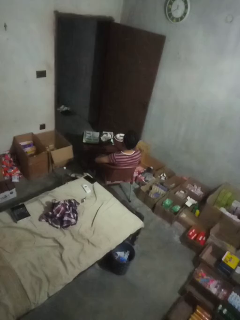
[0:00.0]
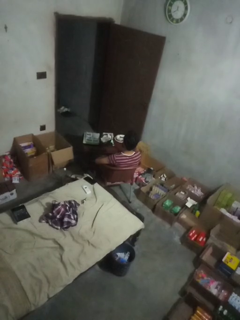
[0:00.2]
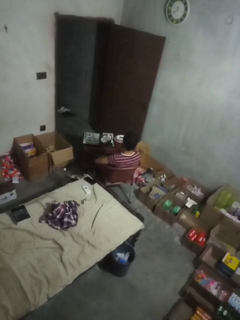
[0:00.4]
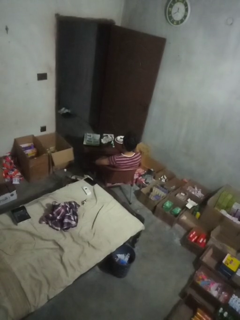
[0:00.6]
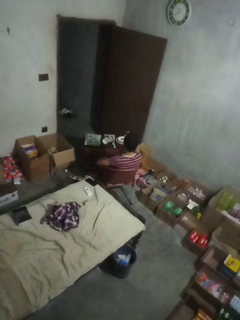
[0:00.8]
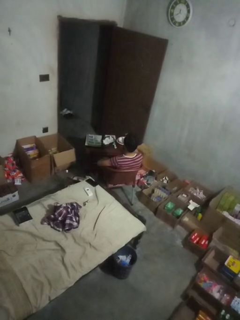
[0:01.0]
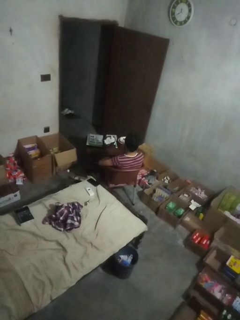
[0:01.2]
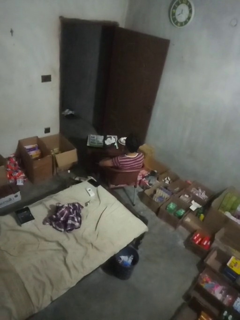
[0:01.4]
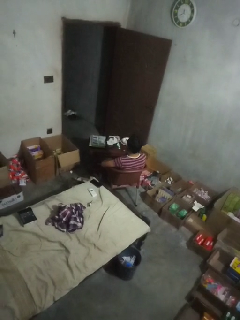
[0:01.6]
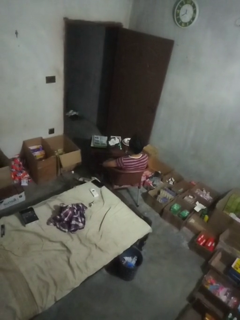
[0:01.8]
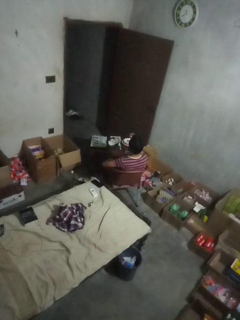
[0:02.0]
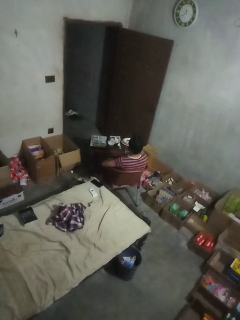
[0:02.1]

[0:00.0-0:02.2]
person puts down object on table

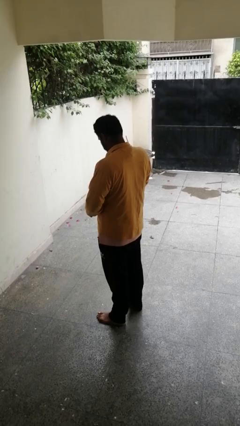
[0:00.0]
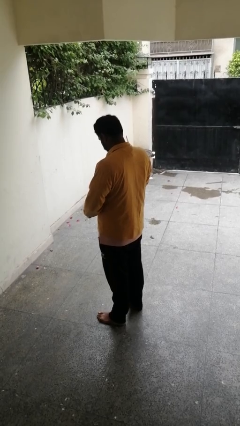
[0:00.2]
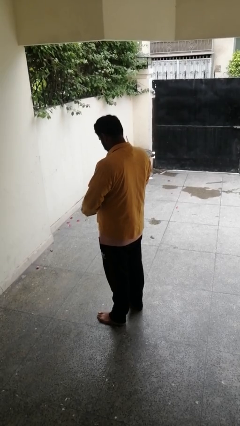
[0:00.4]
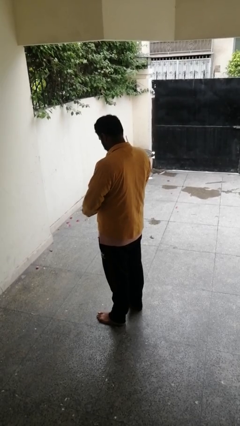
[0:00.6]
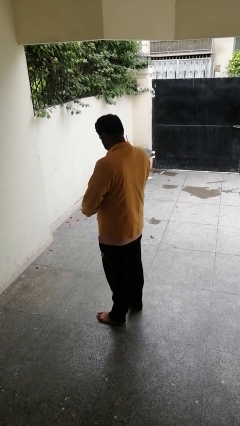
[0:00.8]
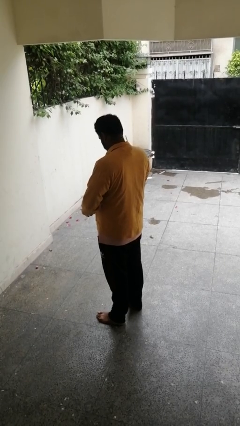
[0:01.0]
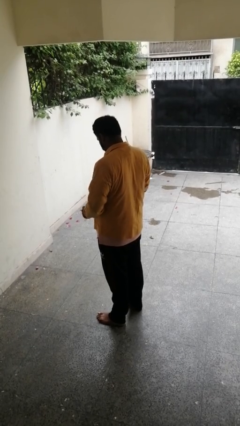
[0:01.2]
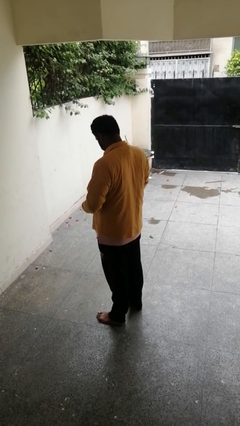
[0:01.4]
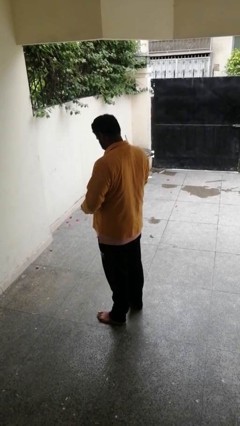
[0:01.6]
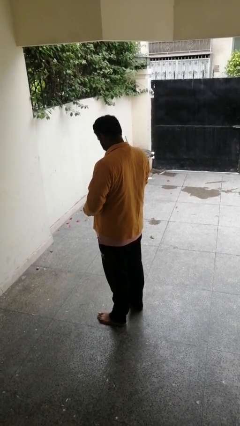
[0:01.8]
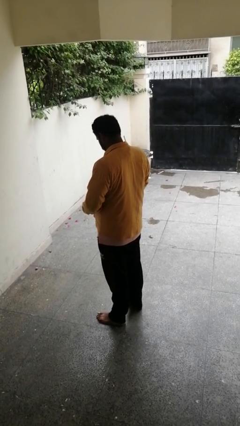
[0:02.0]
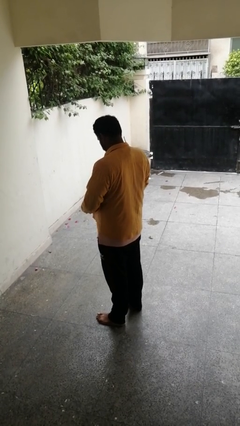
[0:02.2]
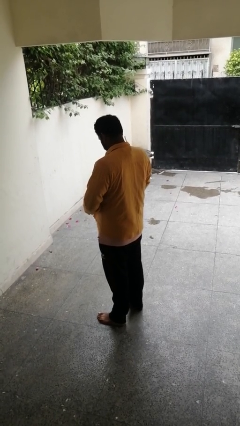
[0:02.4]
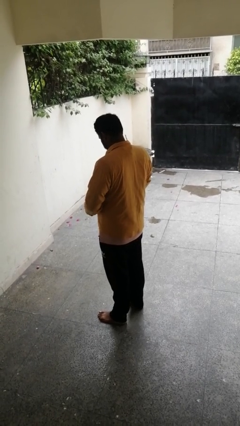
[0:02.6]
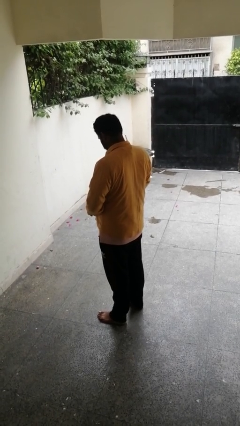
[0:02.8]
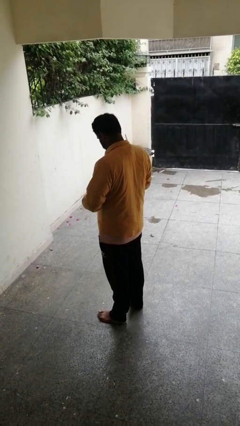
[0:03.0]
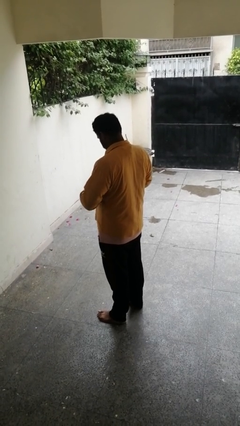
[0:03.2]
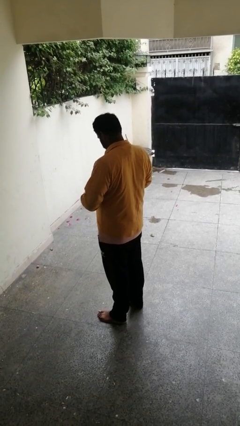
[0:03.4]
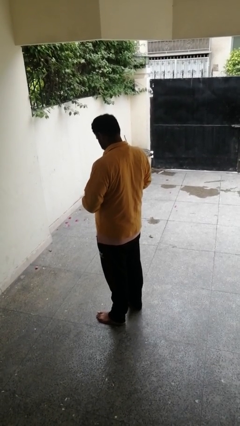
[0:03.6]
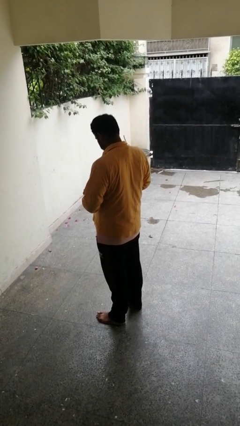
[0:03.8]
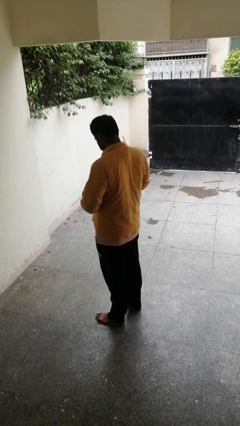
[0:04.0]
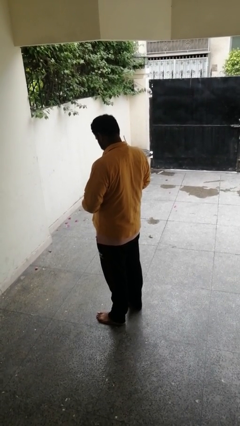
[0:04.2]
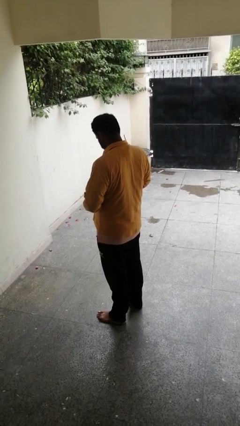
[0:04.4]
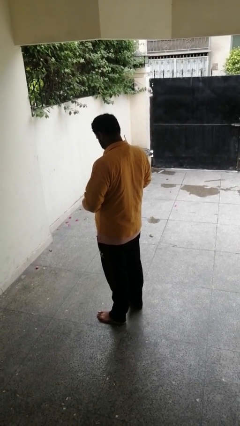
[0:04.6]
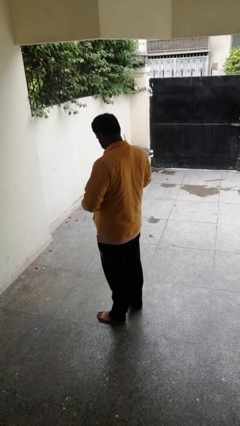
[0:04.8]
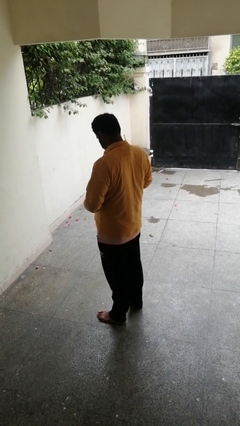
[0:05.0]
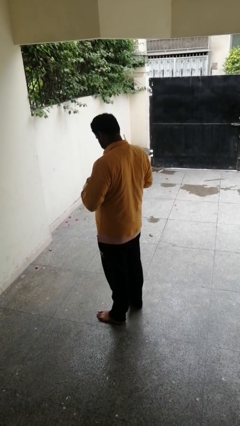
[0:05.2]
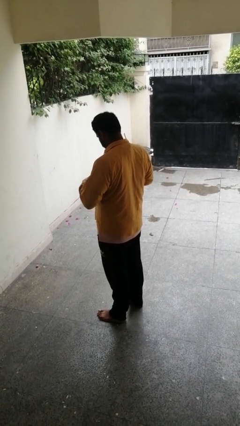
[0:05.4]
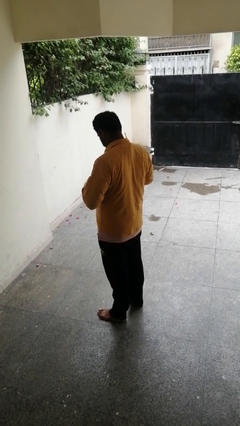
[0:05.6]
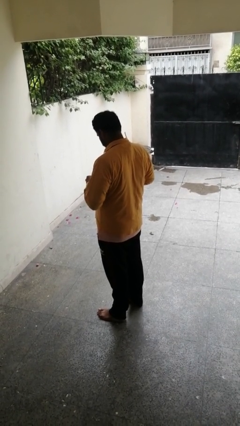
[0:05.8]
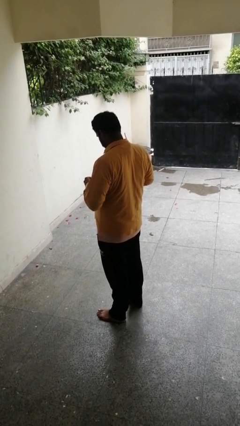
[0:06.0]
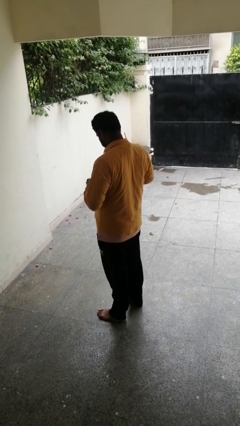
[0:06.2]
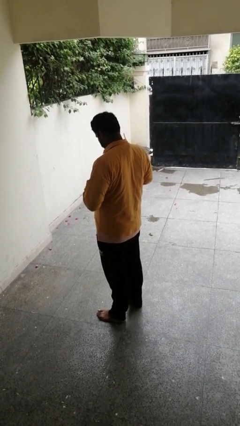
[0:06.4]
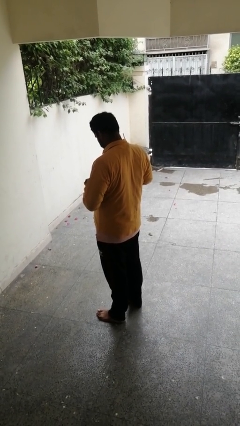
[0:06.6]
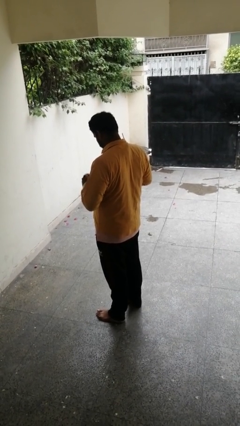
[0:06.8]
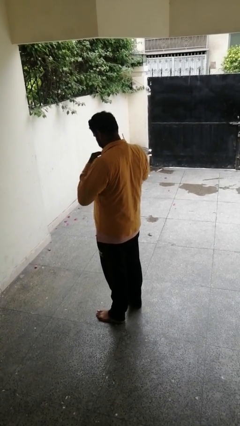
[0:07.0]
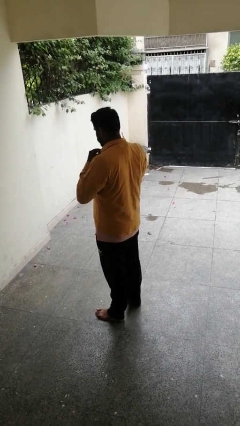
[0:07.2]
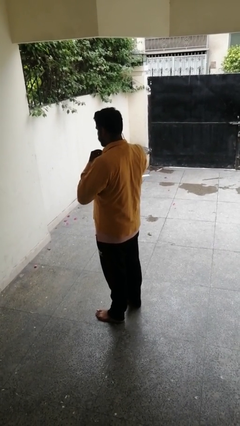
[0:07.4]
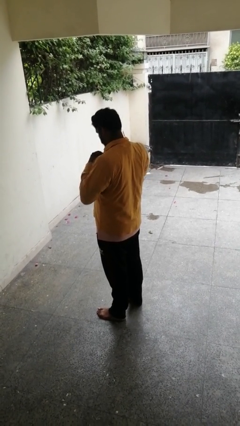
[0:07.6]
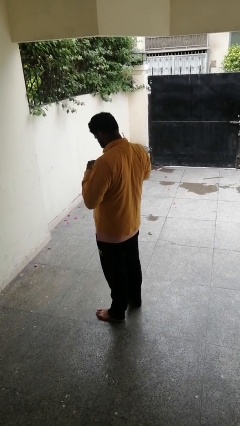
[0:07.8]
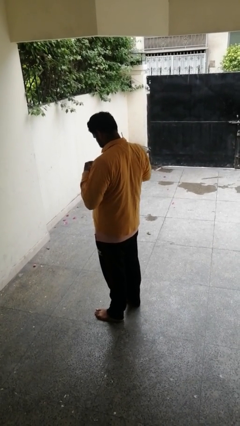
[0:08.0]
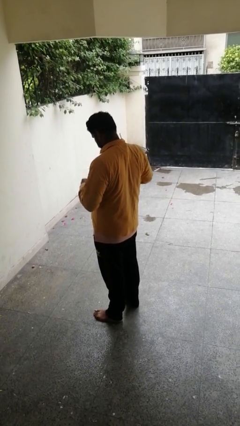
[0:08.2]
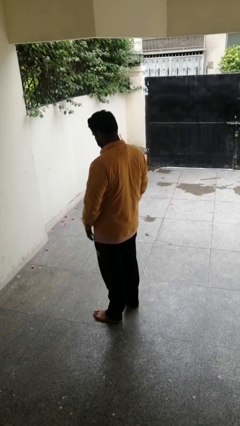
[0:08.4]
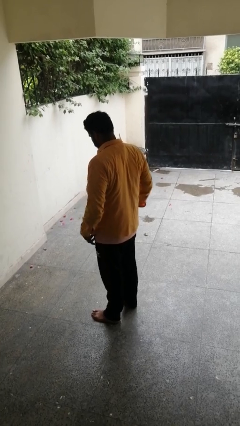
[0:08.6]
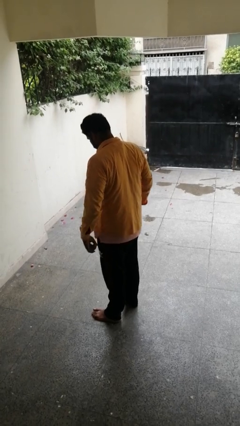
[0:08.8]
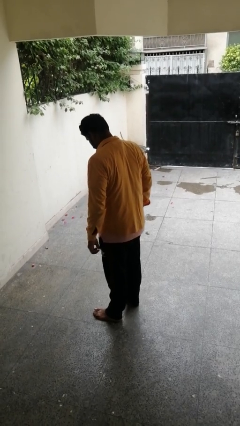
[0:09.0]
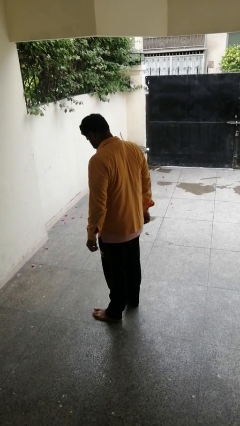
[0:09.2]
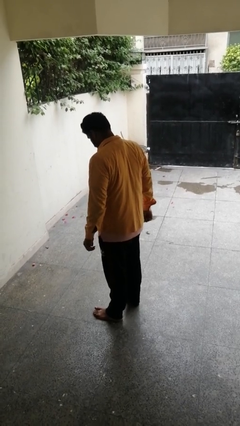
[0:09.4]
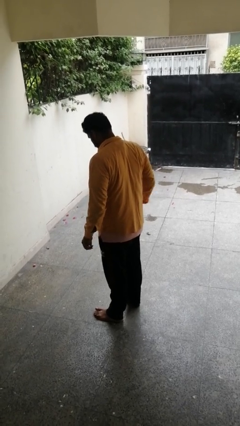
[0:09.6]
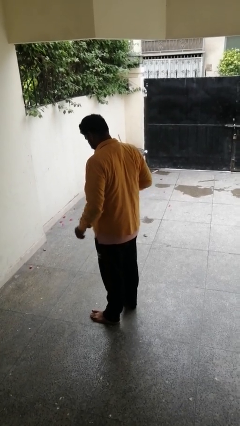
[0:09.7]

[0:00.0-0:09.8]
person buttons shirt

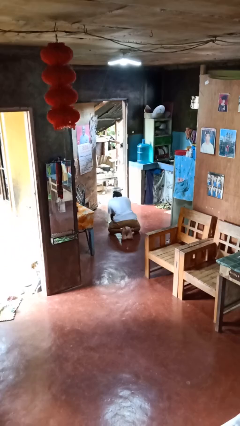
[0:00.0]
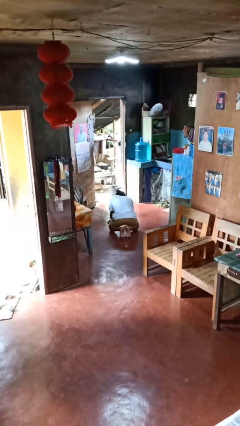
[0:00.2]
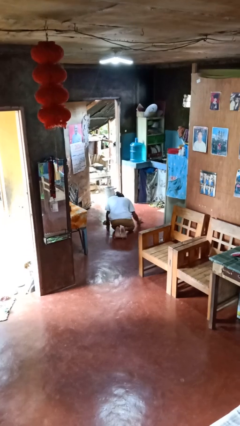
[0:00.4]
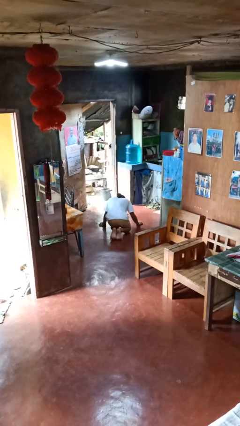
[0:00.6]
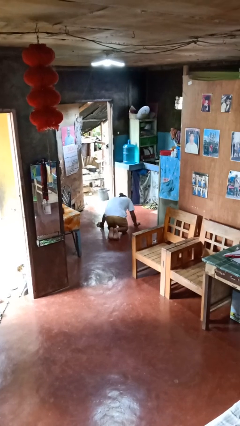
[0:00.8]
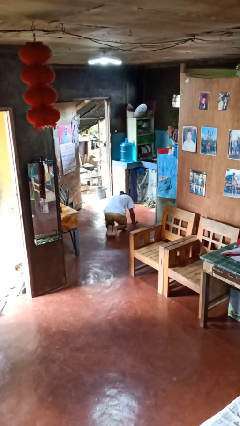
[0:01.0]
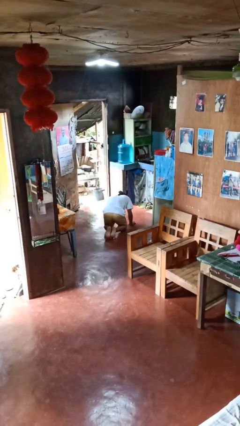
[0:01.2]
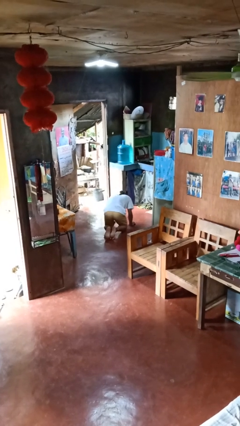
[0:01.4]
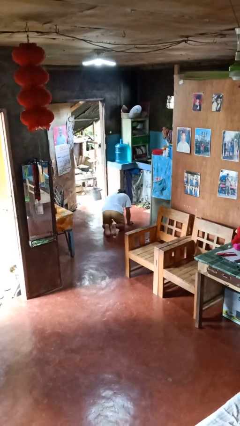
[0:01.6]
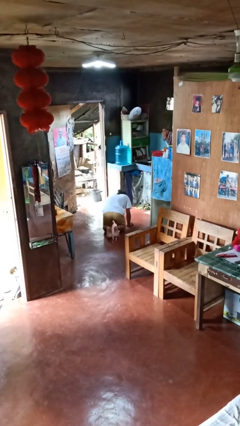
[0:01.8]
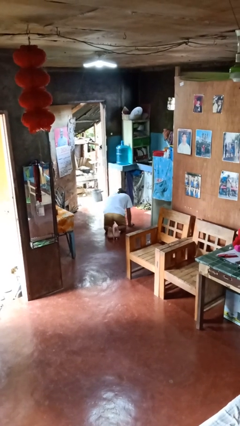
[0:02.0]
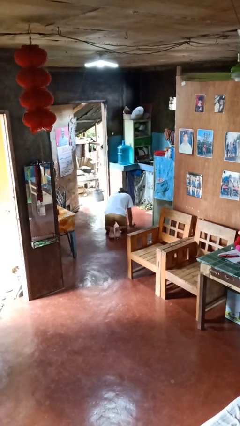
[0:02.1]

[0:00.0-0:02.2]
person crawls
